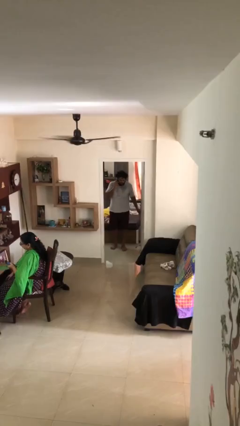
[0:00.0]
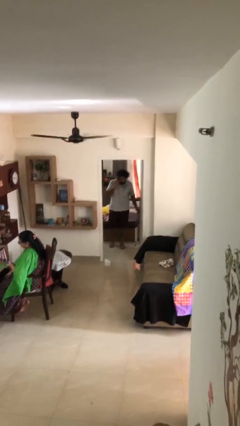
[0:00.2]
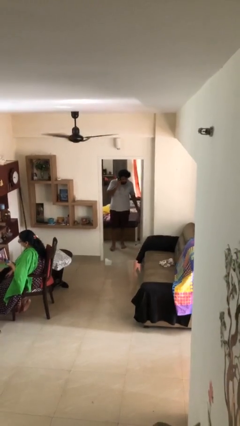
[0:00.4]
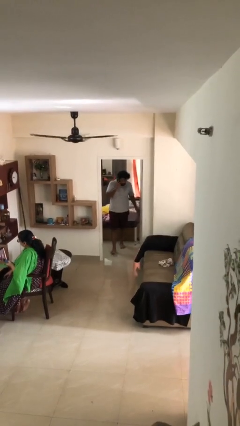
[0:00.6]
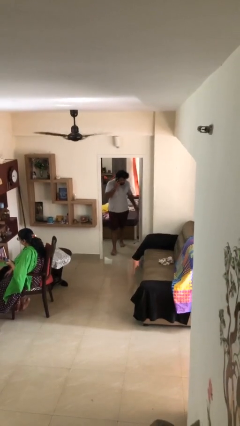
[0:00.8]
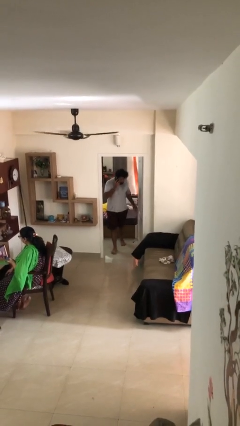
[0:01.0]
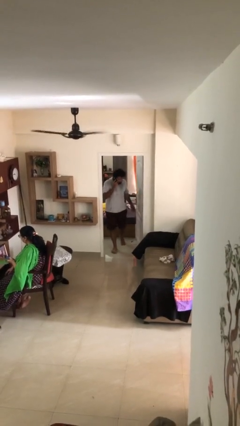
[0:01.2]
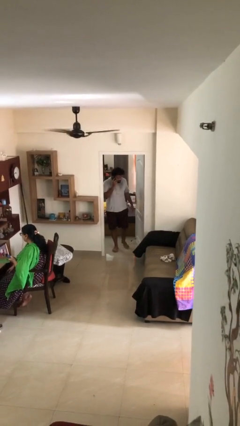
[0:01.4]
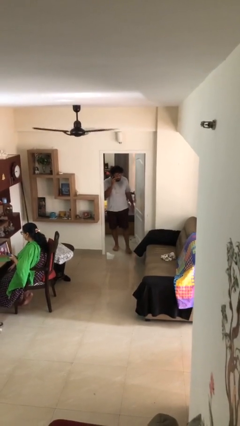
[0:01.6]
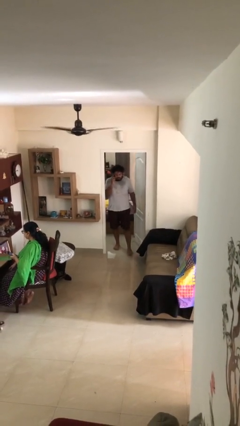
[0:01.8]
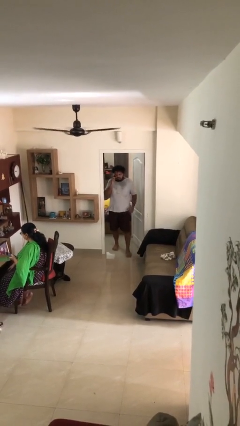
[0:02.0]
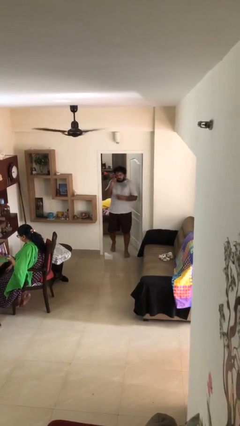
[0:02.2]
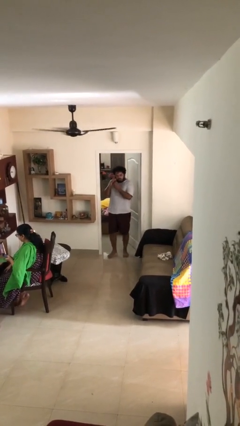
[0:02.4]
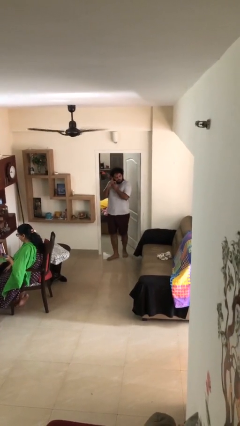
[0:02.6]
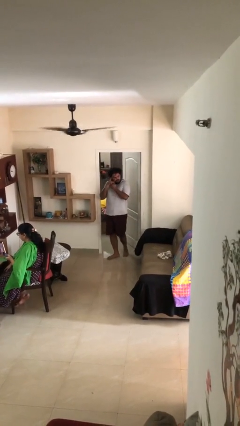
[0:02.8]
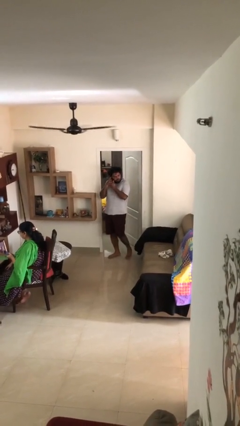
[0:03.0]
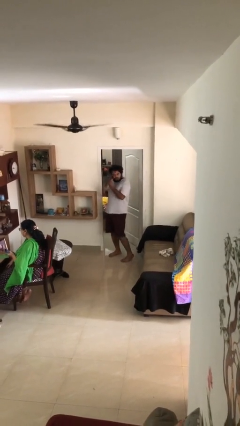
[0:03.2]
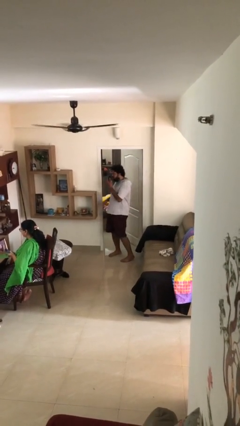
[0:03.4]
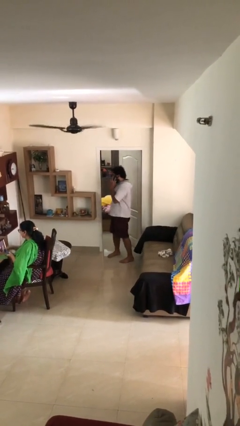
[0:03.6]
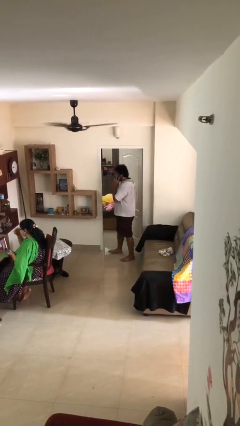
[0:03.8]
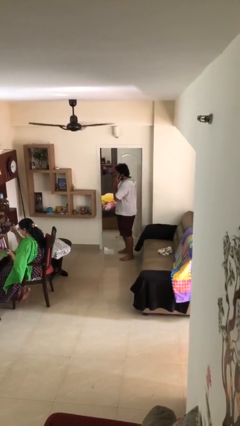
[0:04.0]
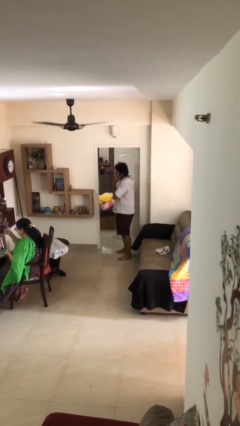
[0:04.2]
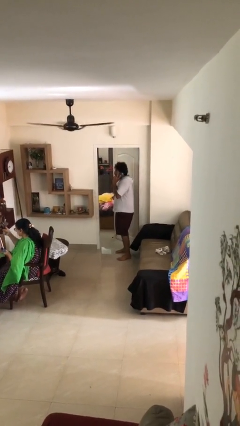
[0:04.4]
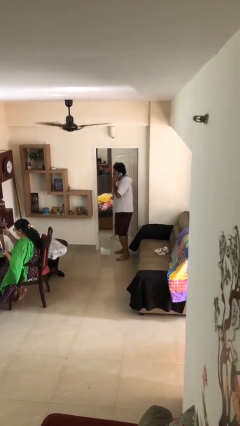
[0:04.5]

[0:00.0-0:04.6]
person enters scene through structure

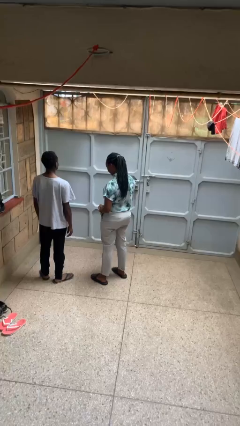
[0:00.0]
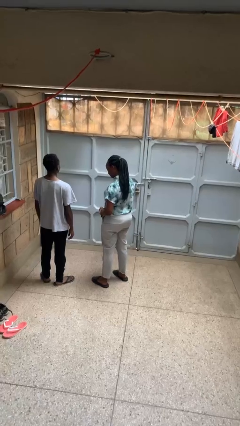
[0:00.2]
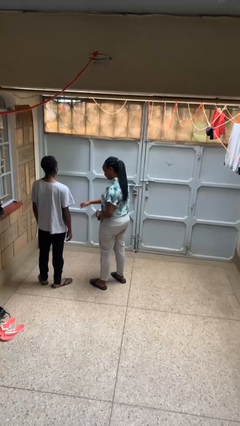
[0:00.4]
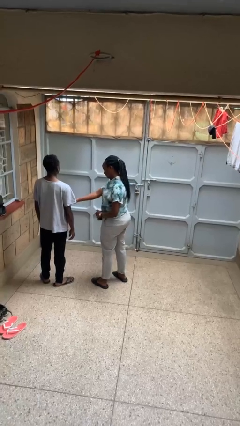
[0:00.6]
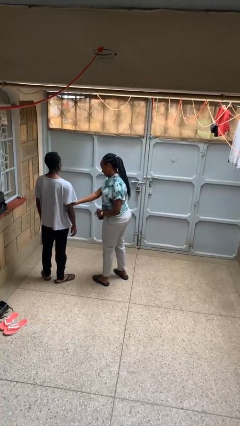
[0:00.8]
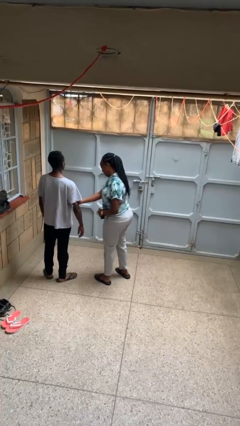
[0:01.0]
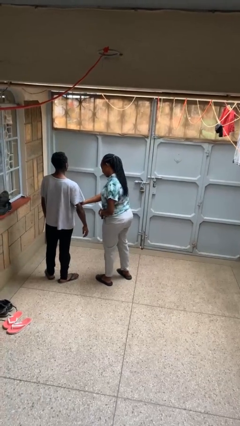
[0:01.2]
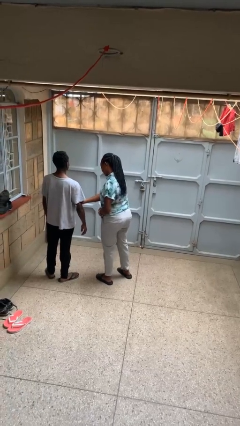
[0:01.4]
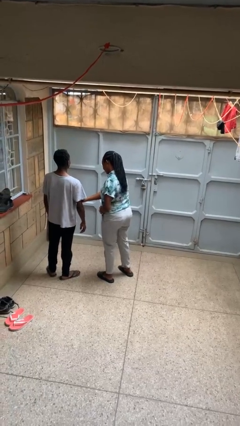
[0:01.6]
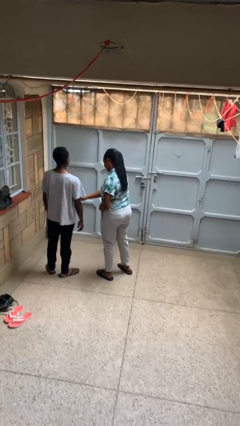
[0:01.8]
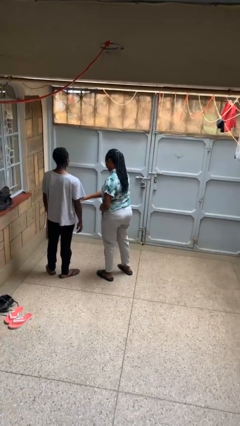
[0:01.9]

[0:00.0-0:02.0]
person grabs person by bicep

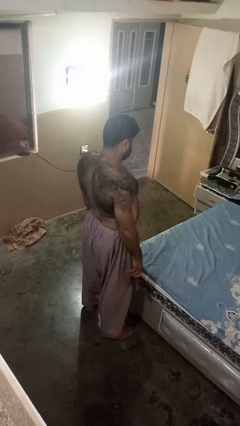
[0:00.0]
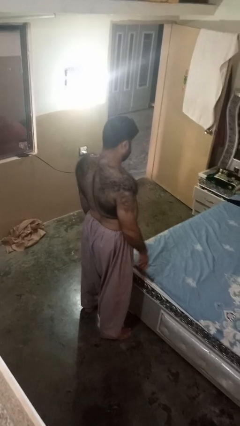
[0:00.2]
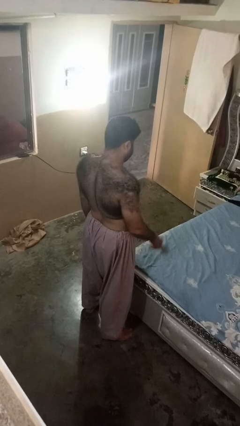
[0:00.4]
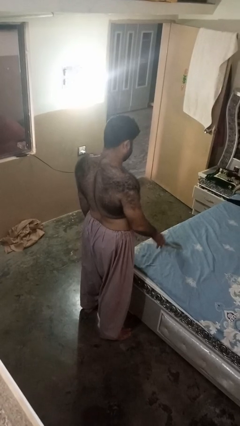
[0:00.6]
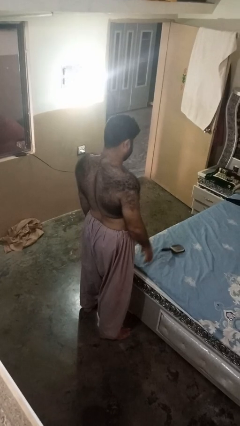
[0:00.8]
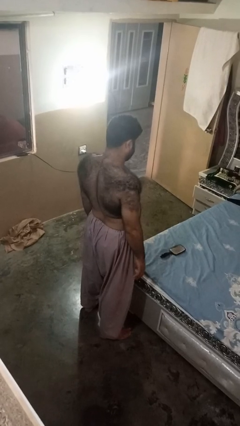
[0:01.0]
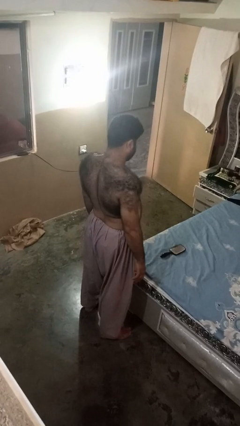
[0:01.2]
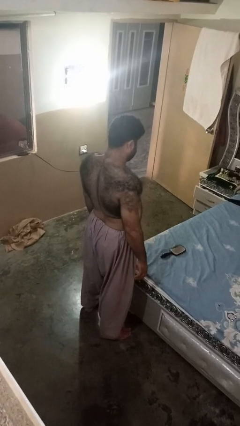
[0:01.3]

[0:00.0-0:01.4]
person throws object on bed

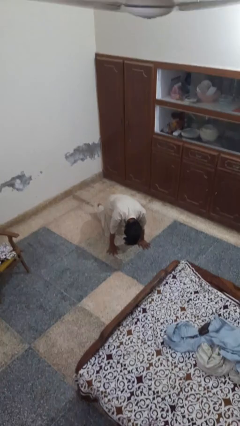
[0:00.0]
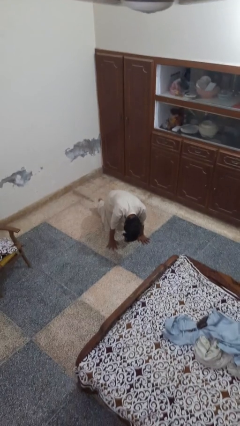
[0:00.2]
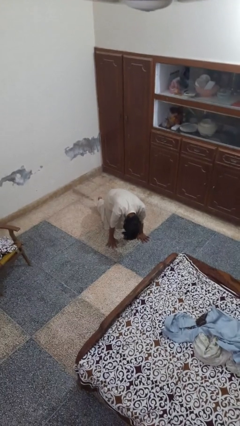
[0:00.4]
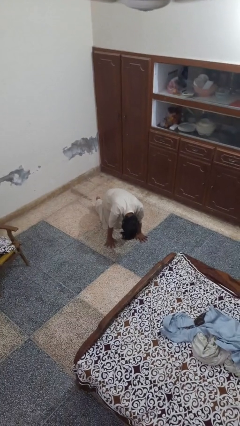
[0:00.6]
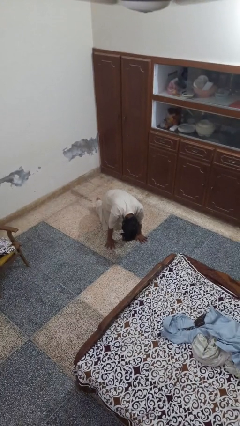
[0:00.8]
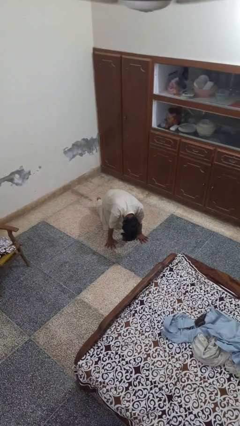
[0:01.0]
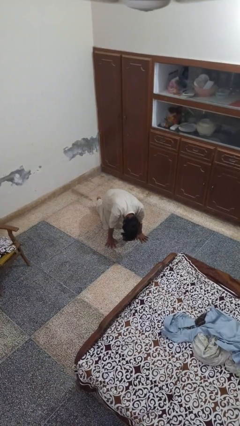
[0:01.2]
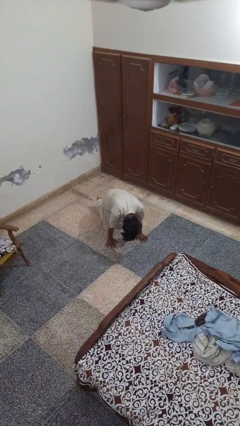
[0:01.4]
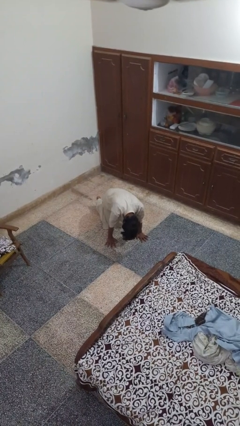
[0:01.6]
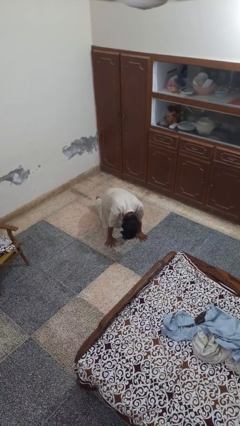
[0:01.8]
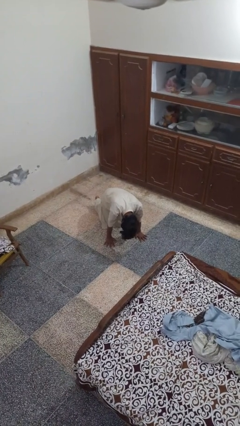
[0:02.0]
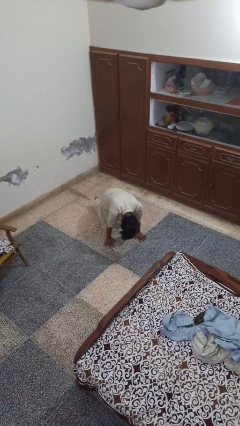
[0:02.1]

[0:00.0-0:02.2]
person lies down on floor

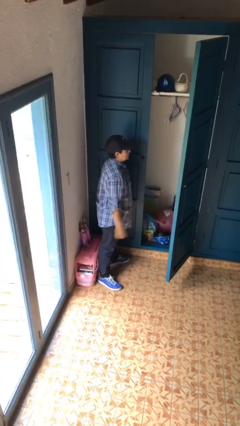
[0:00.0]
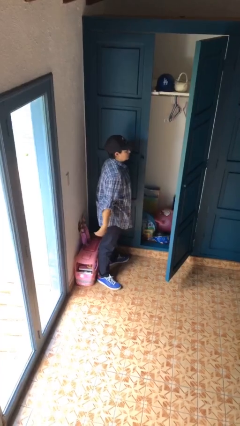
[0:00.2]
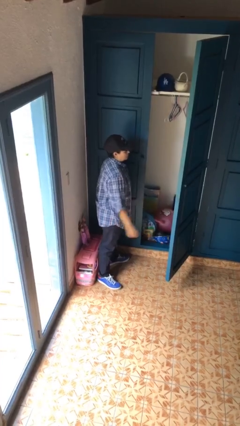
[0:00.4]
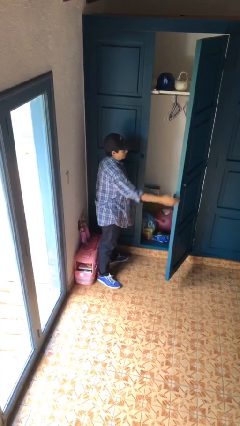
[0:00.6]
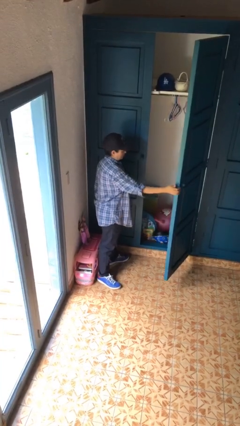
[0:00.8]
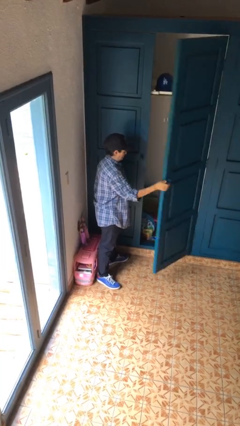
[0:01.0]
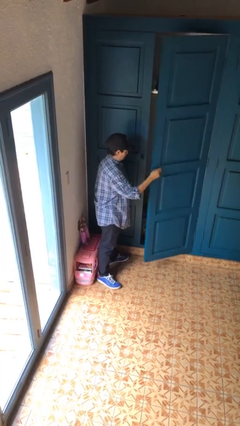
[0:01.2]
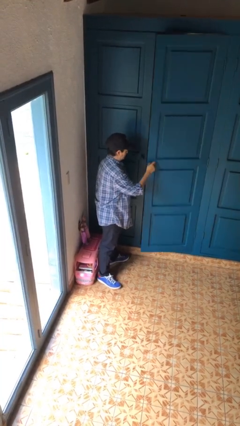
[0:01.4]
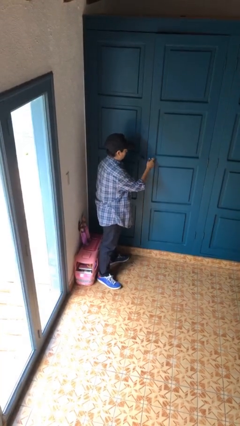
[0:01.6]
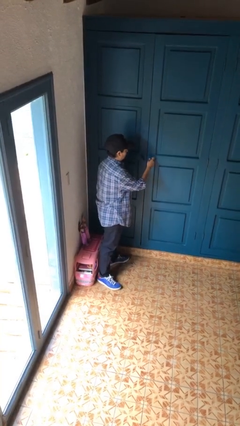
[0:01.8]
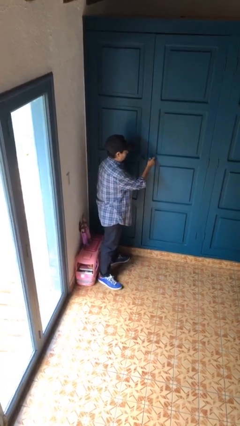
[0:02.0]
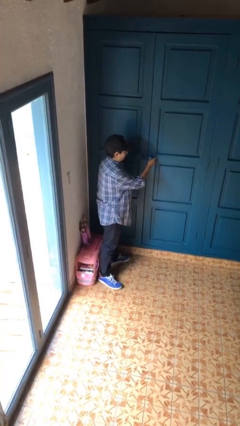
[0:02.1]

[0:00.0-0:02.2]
person closes closet door

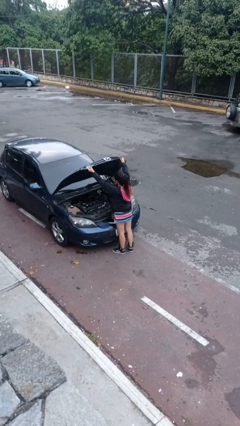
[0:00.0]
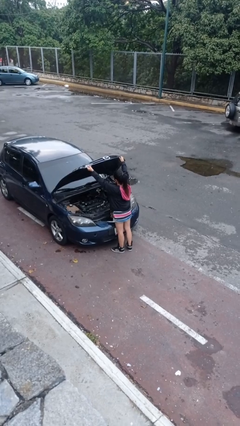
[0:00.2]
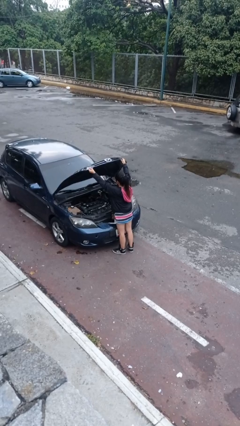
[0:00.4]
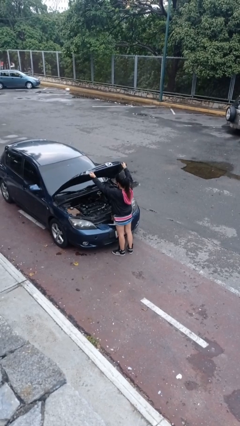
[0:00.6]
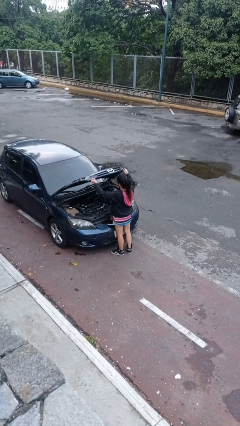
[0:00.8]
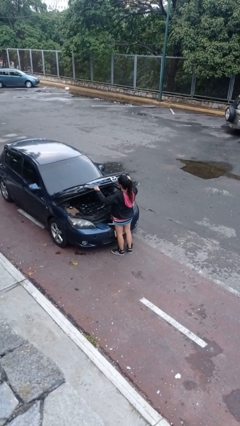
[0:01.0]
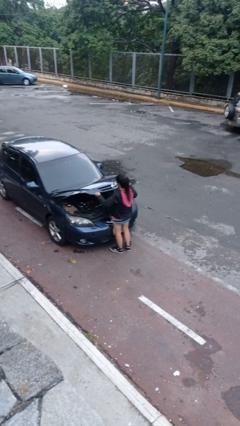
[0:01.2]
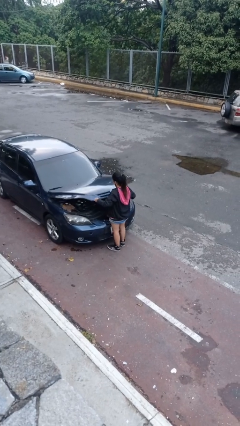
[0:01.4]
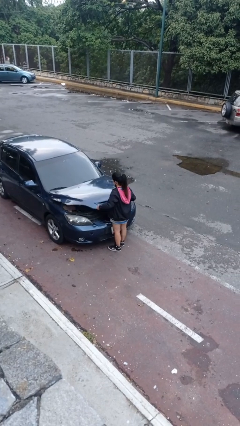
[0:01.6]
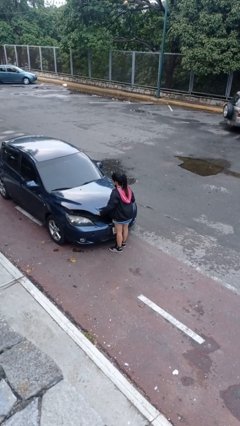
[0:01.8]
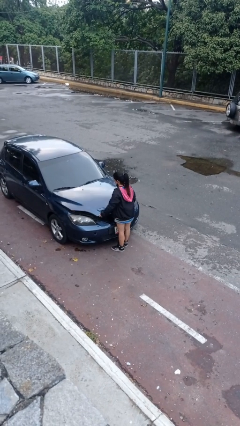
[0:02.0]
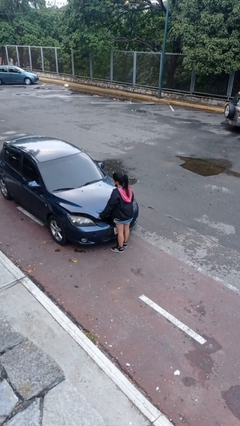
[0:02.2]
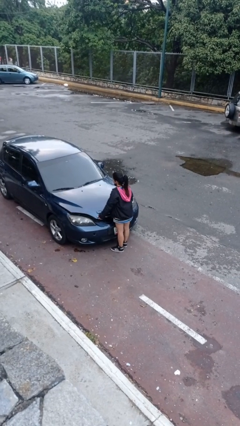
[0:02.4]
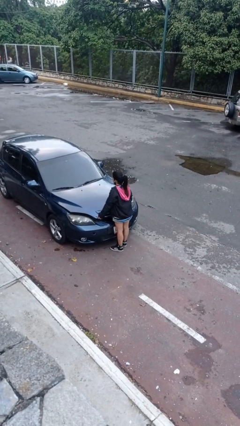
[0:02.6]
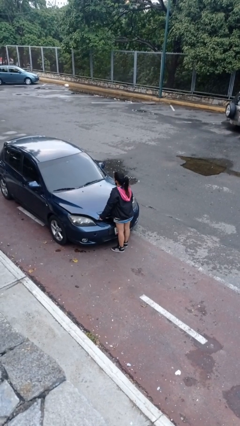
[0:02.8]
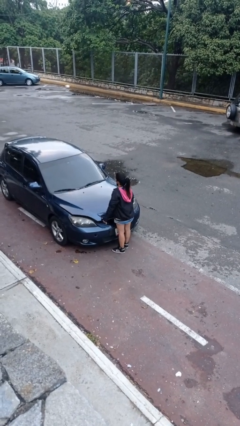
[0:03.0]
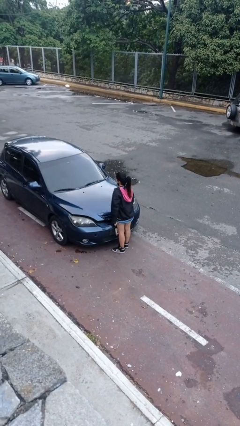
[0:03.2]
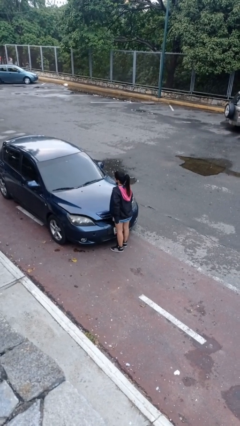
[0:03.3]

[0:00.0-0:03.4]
person closes car hood

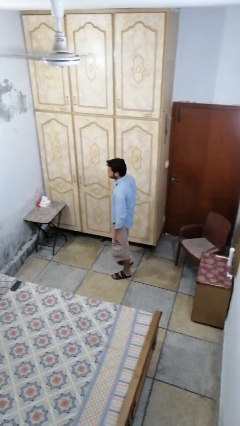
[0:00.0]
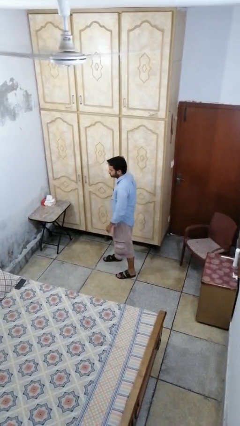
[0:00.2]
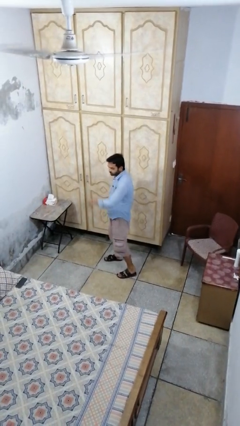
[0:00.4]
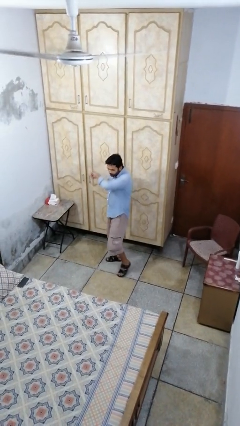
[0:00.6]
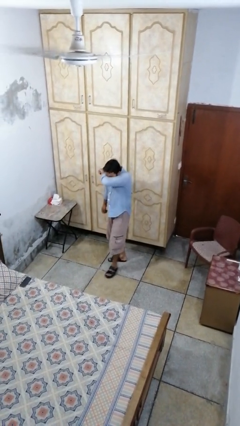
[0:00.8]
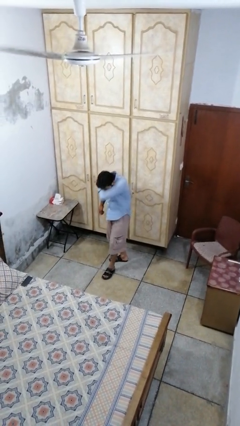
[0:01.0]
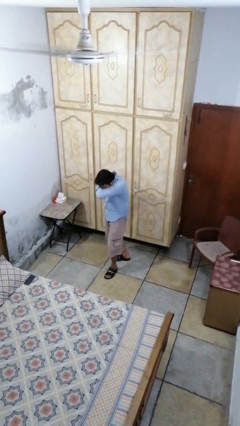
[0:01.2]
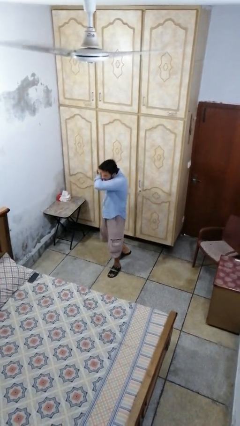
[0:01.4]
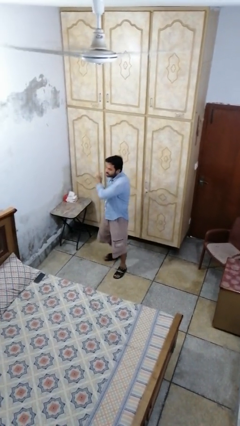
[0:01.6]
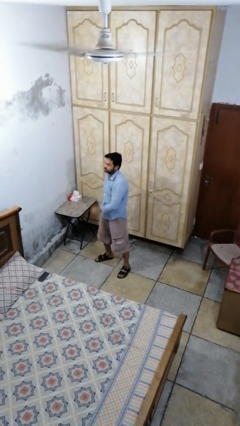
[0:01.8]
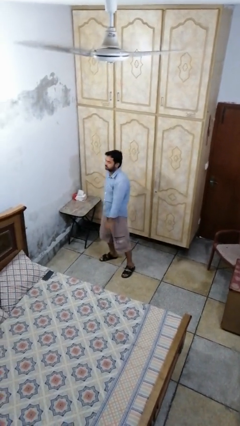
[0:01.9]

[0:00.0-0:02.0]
person sneezes into arm
